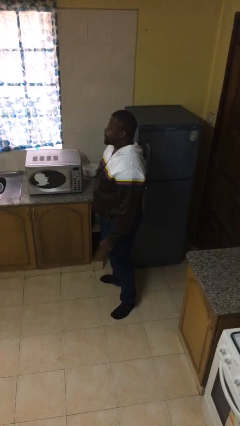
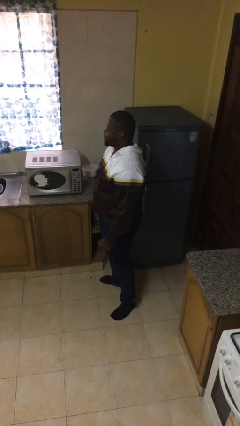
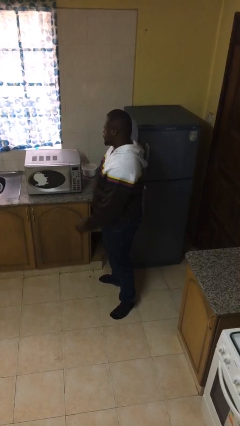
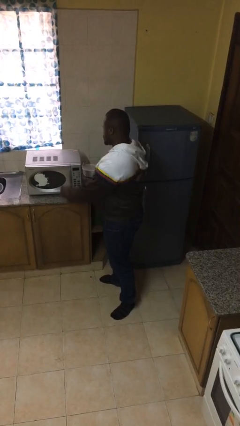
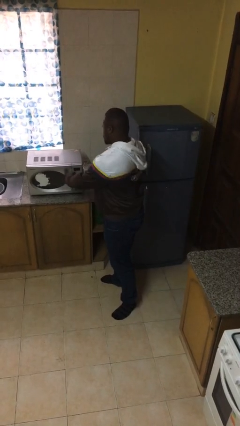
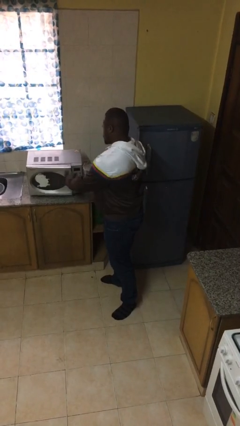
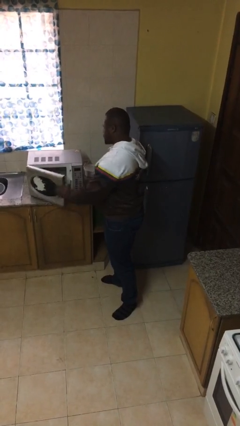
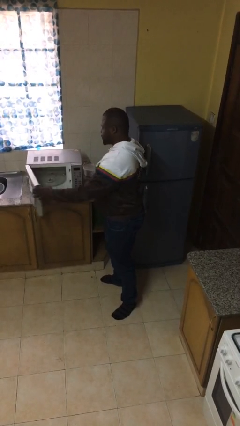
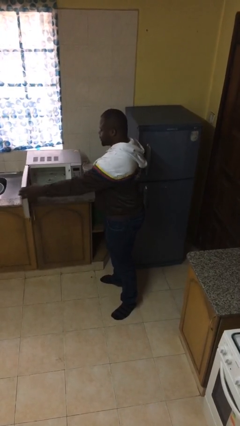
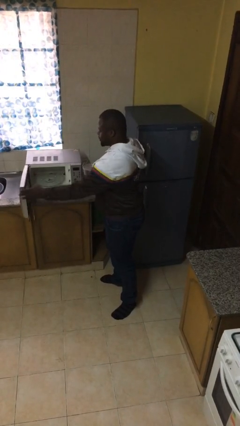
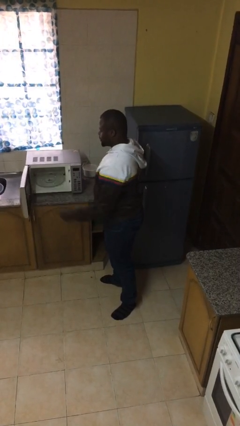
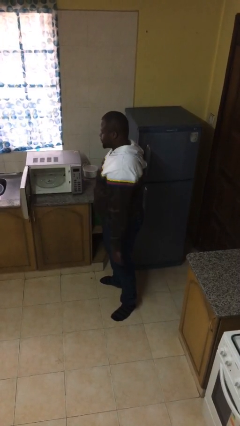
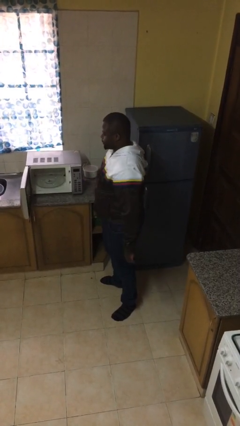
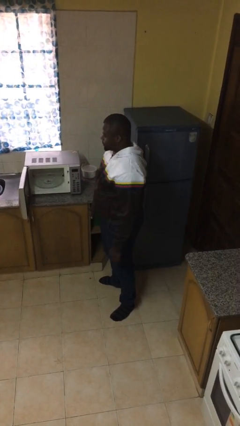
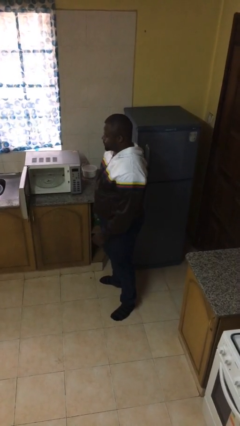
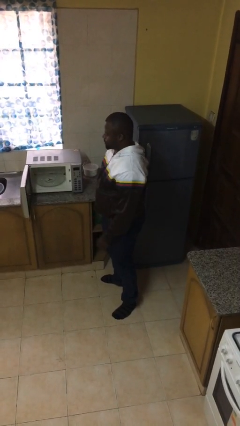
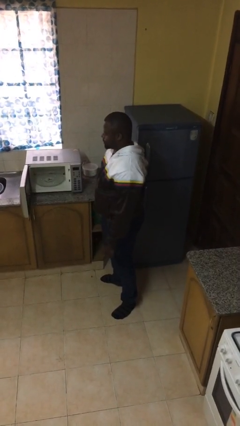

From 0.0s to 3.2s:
person opens microwave

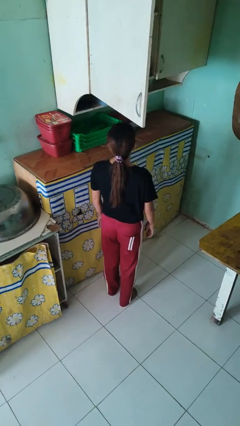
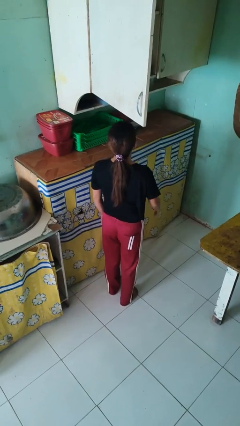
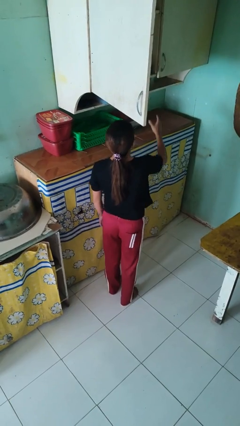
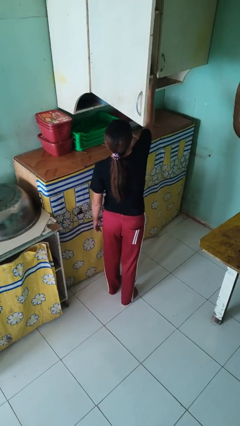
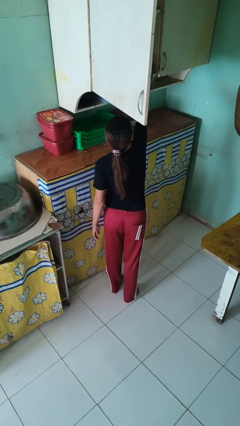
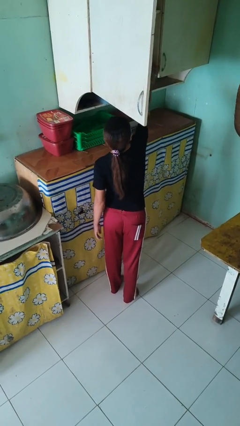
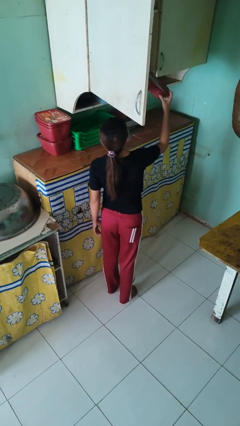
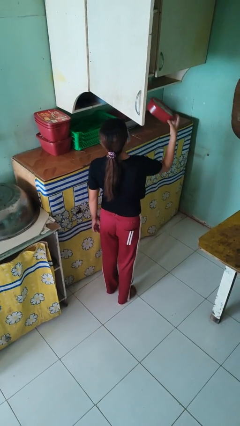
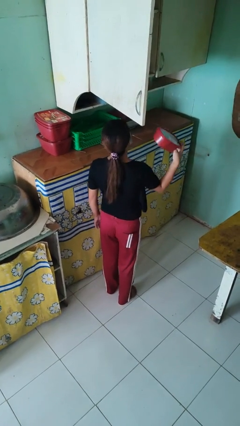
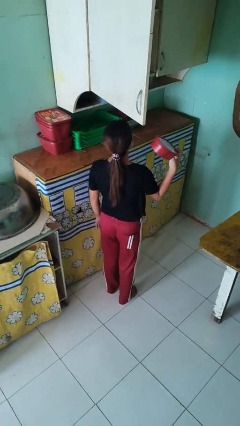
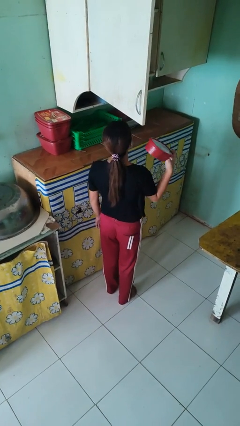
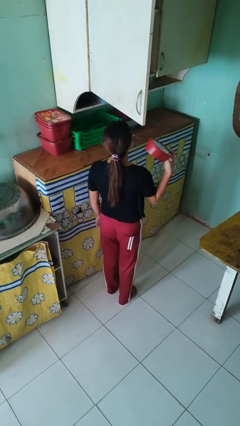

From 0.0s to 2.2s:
person takes object from cabinet

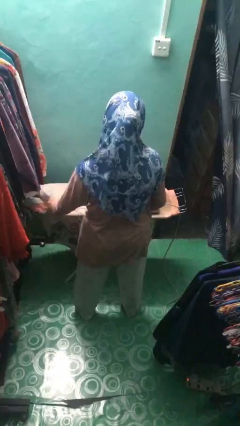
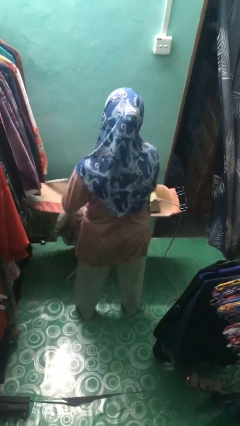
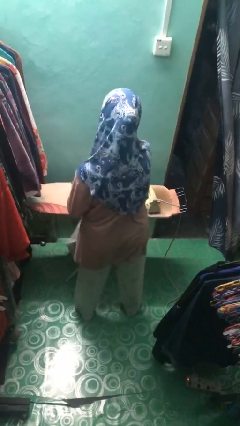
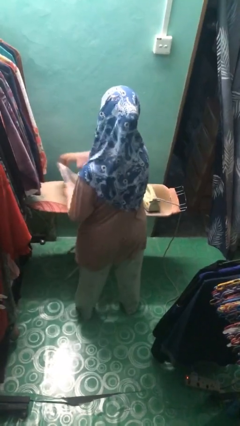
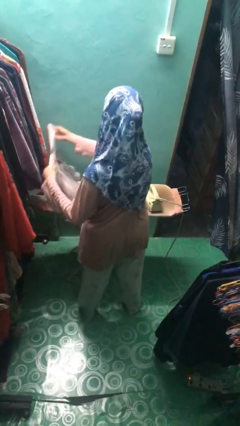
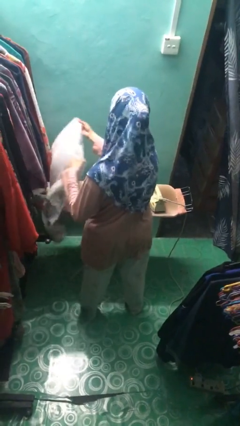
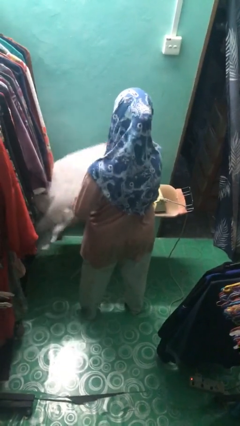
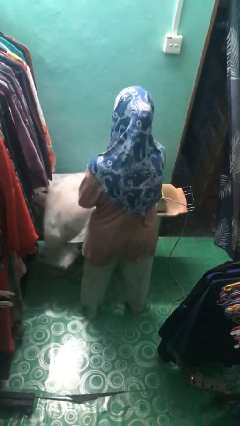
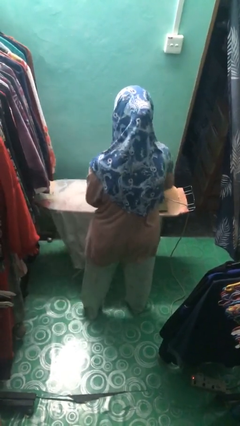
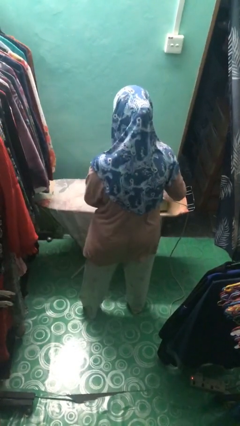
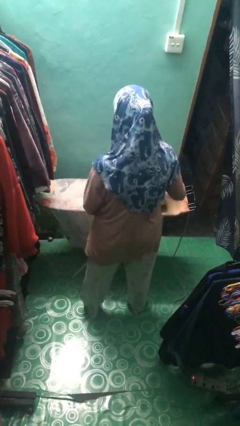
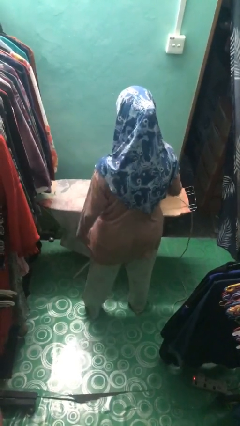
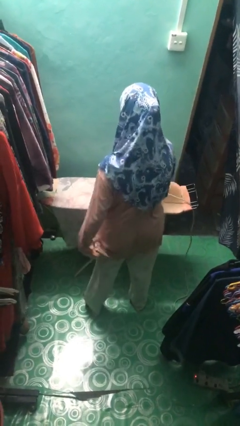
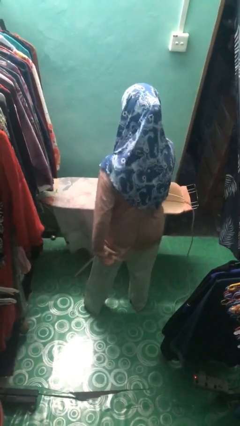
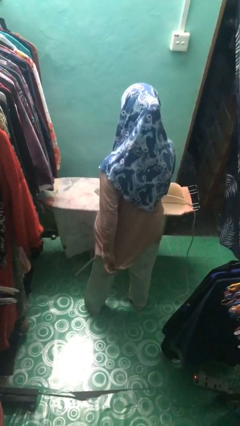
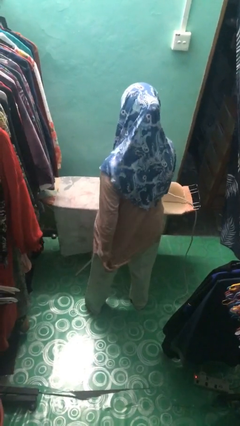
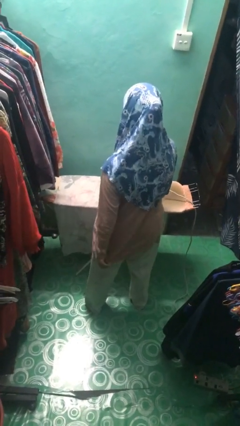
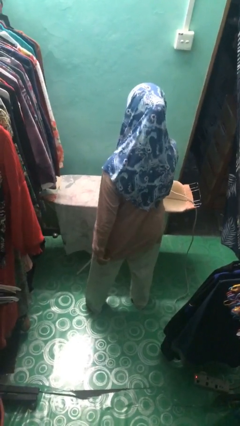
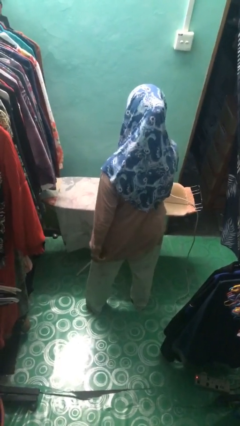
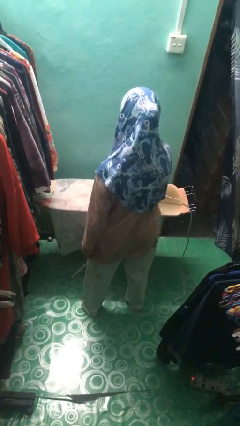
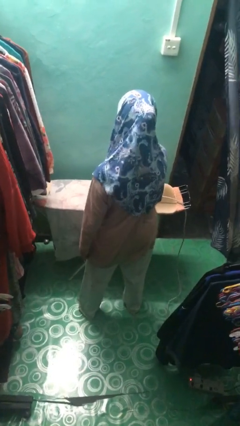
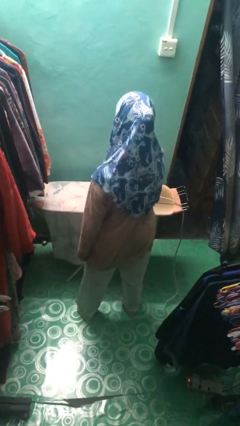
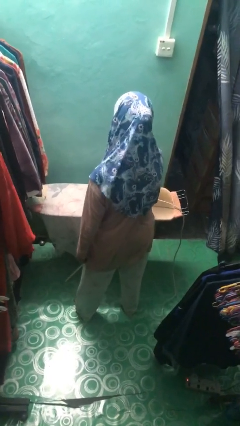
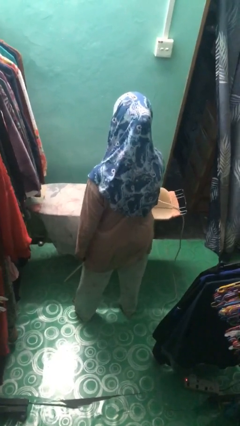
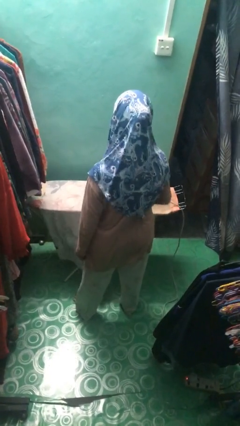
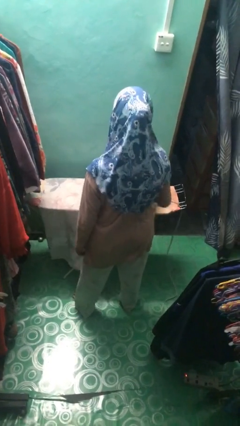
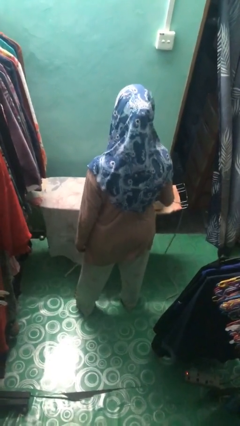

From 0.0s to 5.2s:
person irons clothes

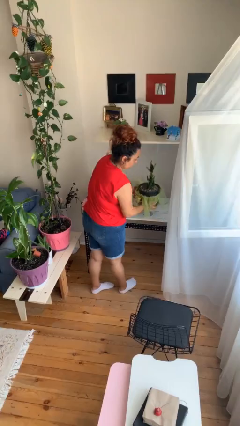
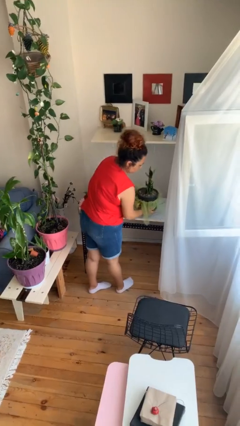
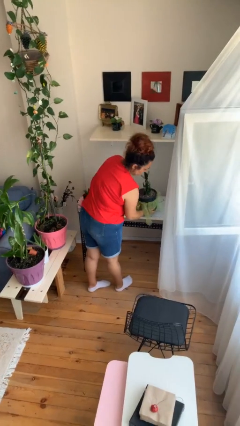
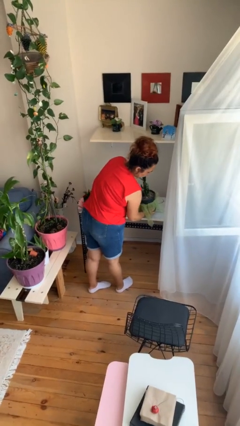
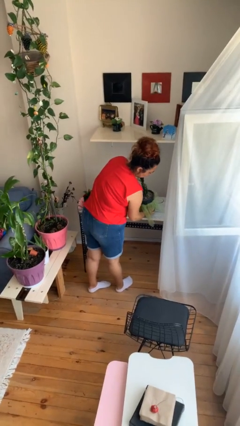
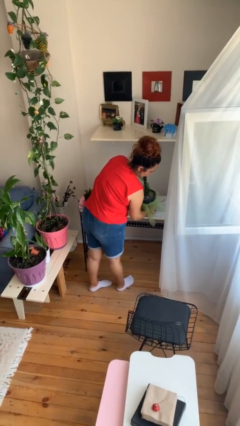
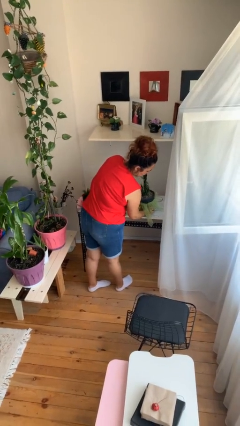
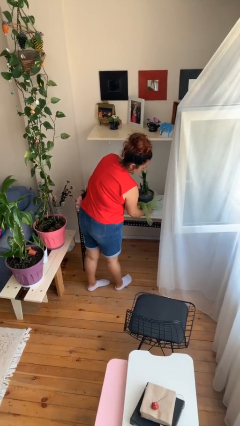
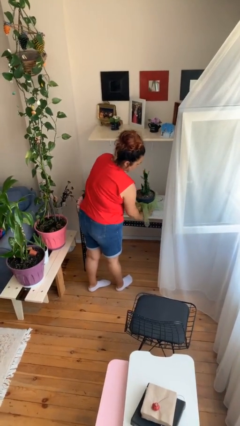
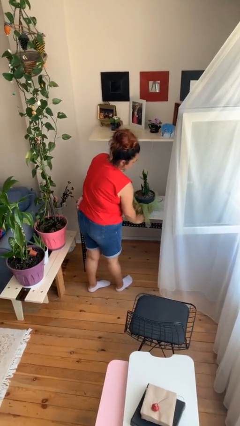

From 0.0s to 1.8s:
person puts down object on table

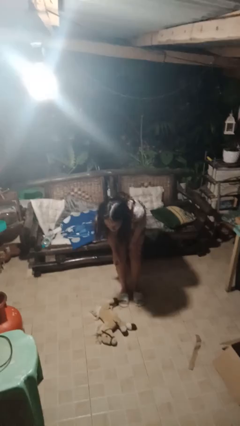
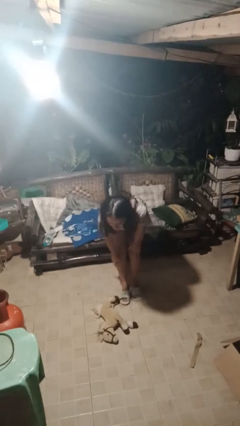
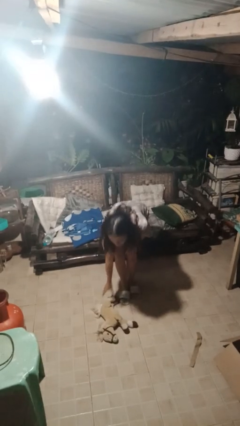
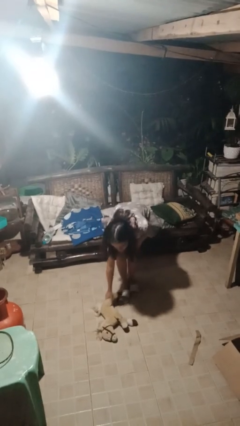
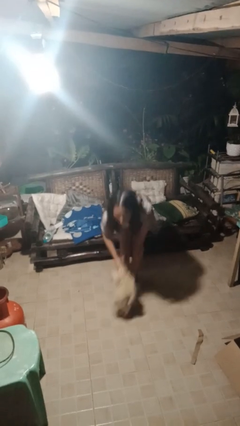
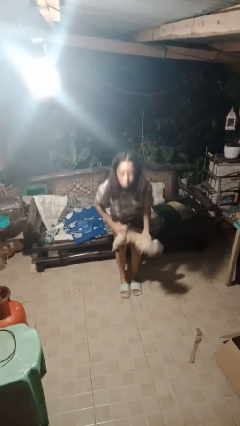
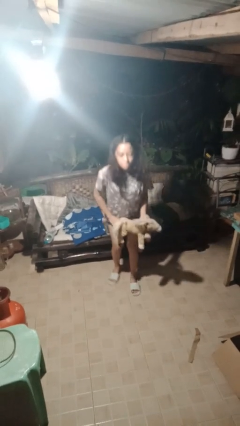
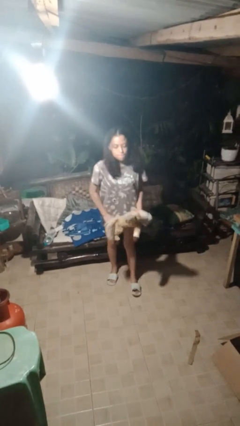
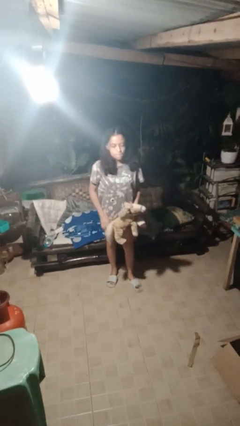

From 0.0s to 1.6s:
person picks up object from floor

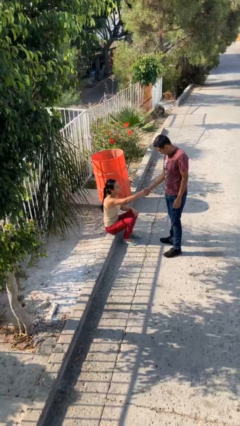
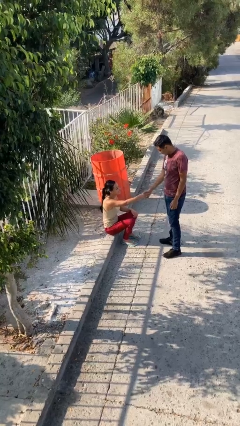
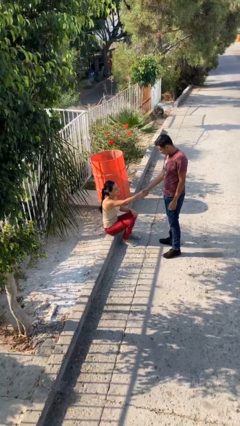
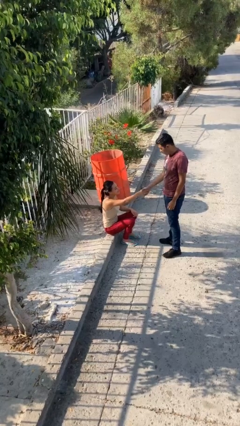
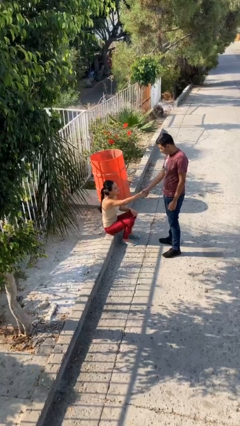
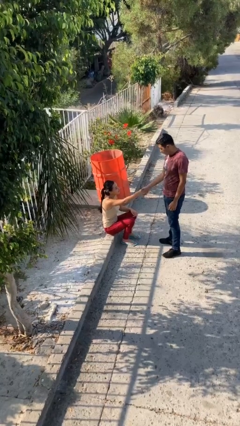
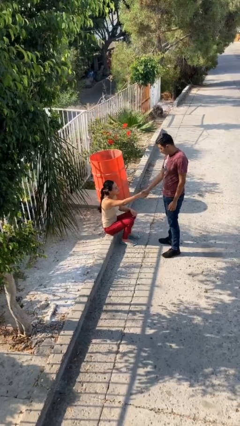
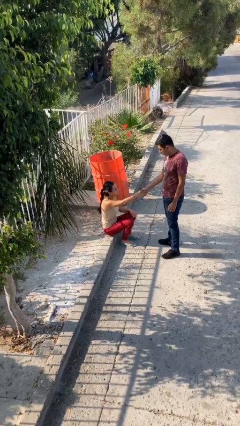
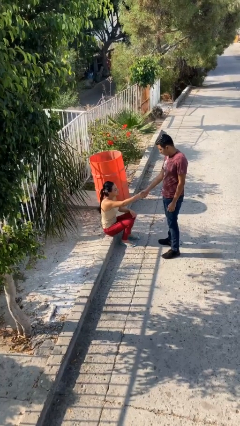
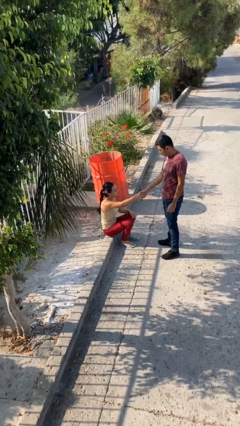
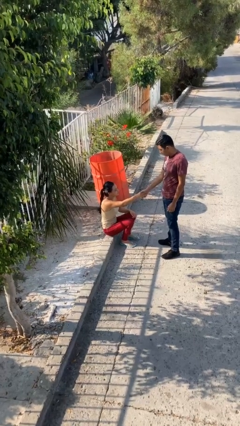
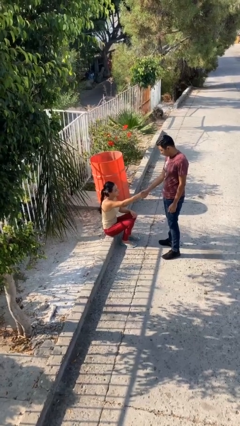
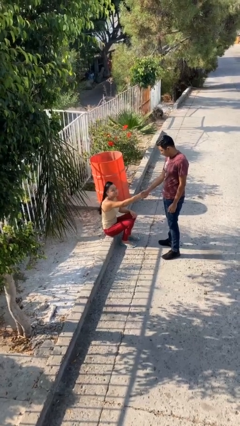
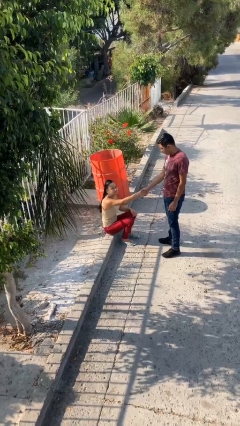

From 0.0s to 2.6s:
person shakes hand

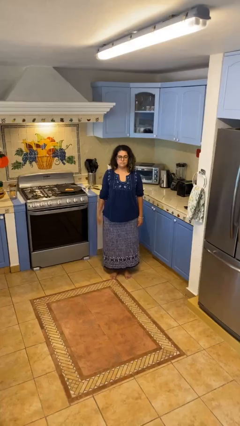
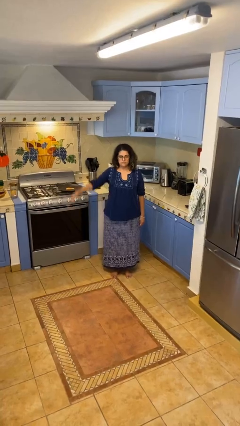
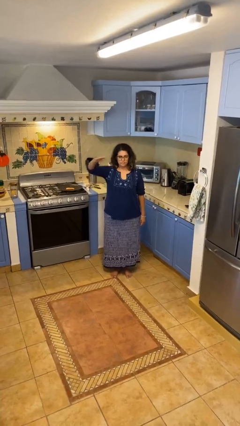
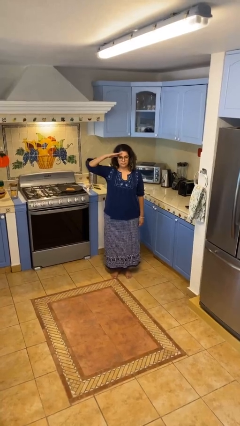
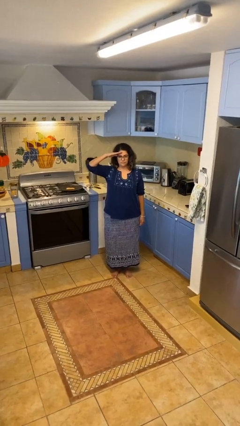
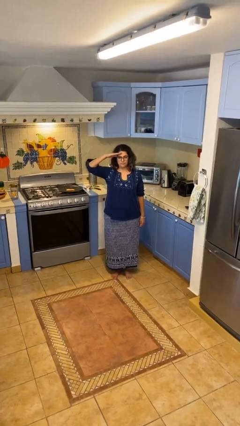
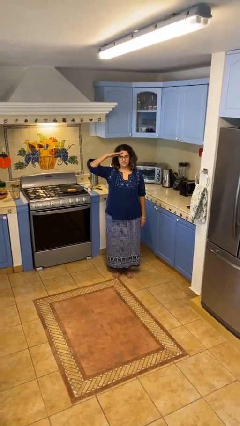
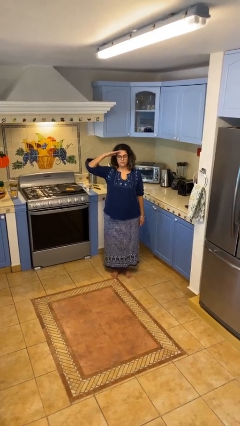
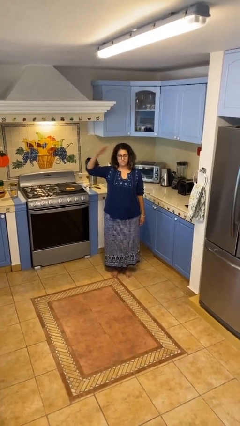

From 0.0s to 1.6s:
person salutes
